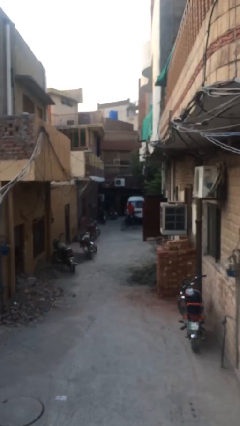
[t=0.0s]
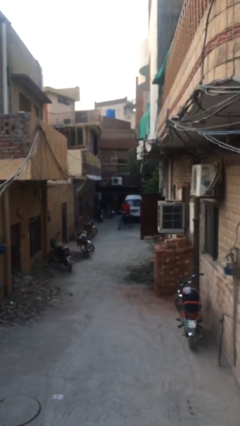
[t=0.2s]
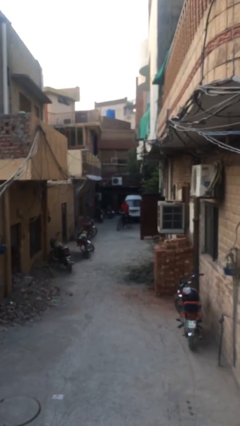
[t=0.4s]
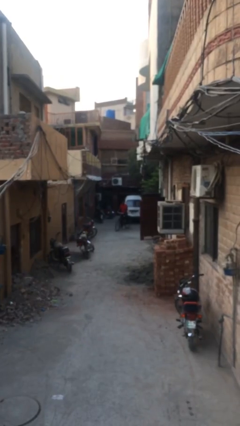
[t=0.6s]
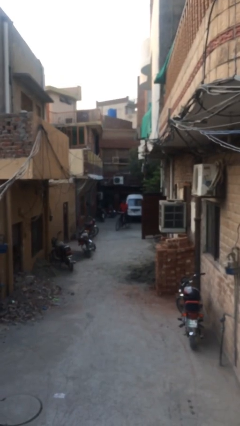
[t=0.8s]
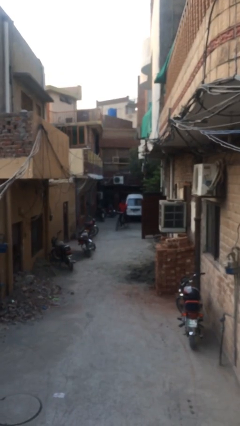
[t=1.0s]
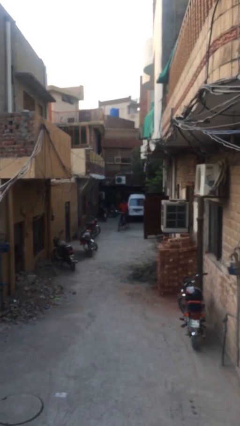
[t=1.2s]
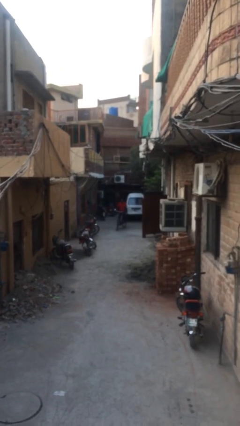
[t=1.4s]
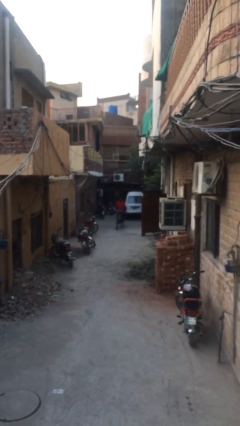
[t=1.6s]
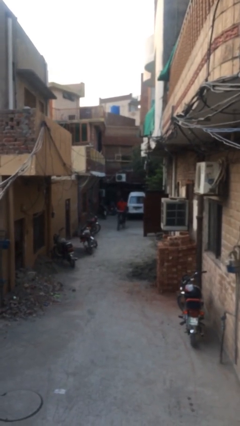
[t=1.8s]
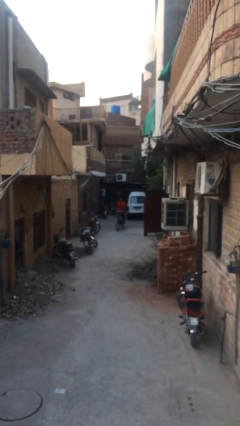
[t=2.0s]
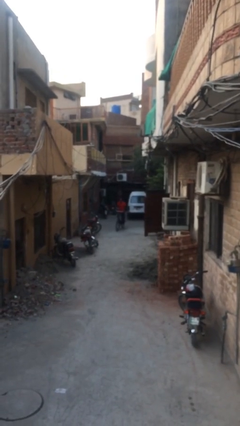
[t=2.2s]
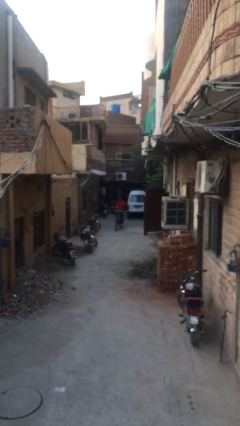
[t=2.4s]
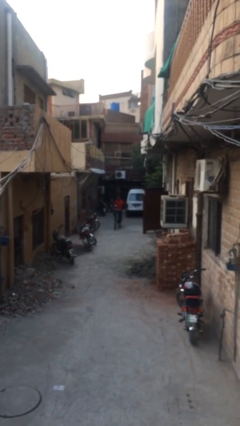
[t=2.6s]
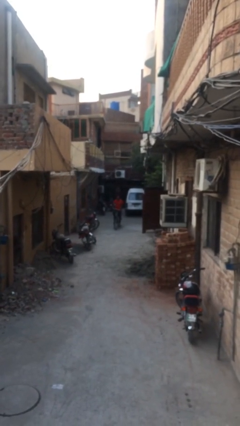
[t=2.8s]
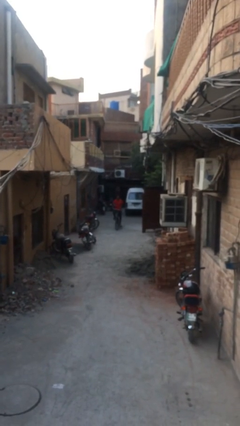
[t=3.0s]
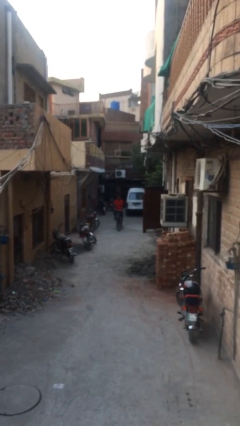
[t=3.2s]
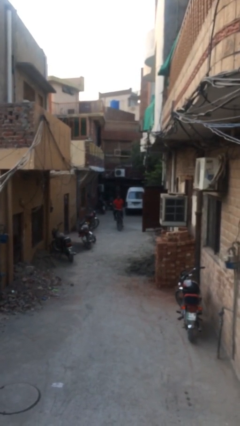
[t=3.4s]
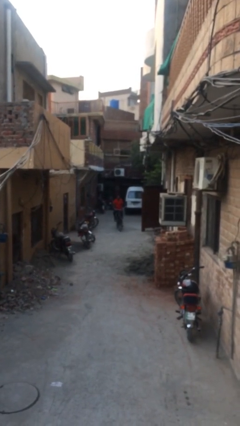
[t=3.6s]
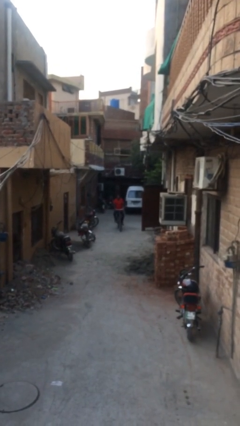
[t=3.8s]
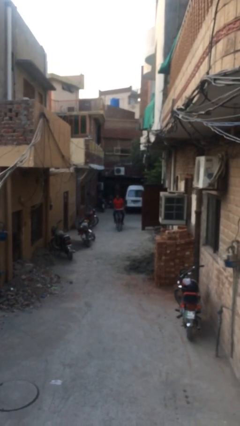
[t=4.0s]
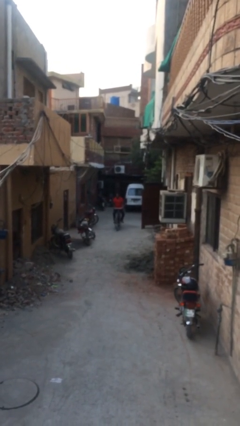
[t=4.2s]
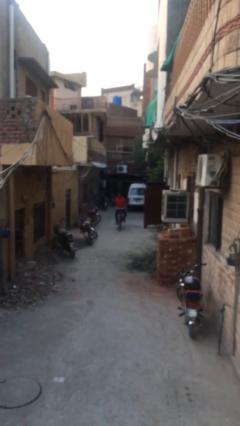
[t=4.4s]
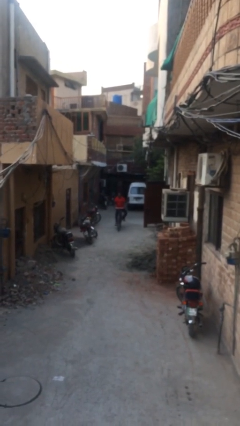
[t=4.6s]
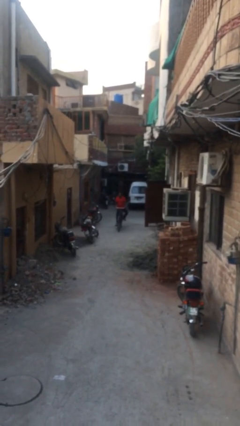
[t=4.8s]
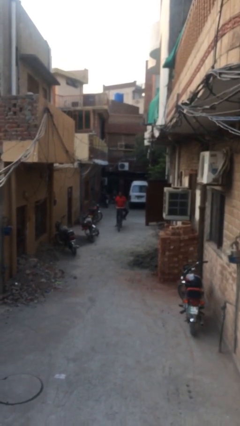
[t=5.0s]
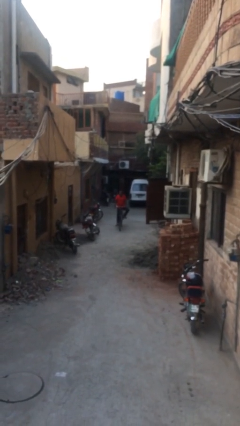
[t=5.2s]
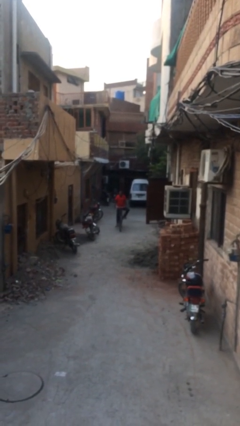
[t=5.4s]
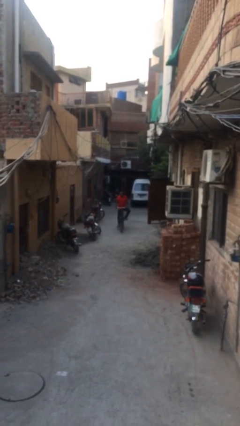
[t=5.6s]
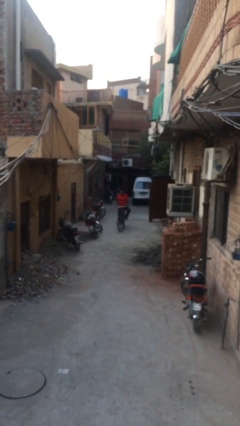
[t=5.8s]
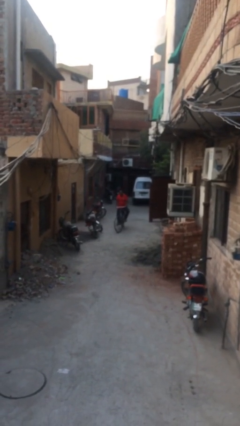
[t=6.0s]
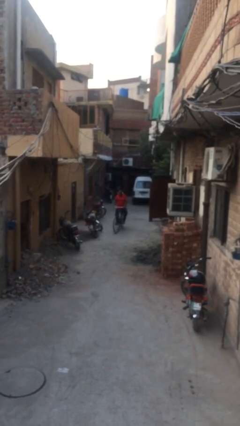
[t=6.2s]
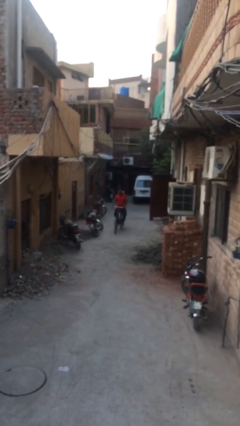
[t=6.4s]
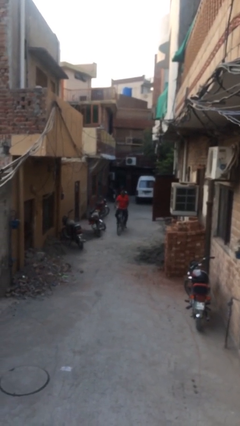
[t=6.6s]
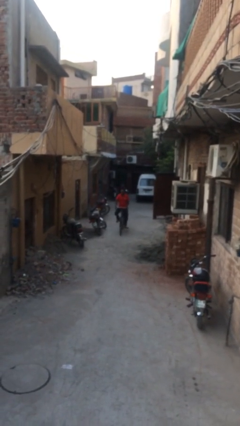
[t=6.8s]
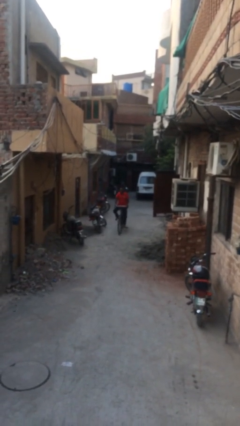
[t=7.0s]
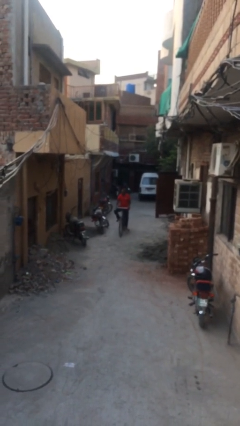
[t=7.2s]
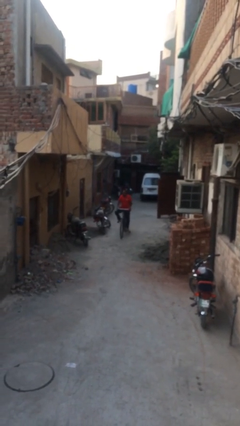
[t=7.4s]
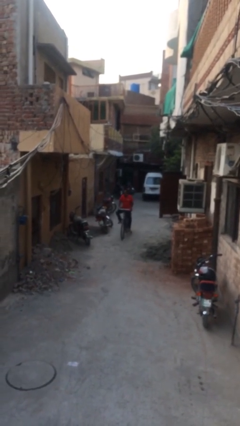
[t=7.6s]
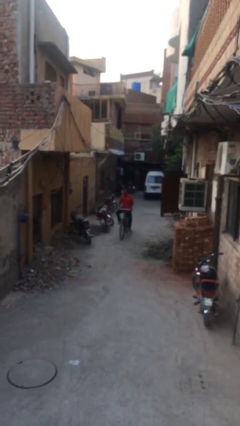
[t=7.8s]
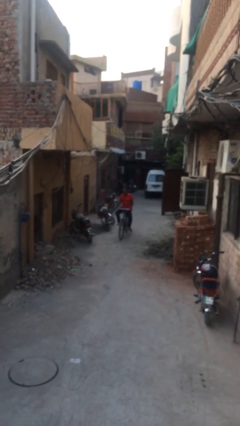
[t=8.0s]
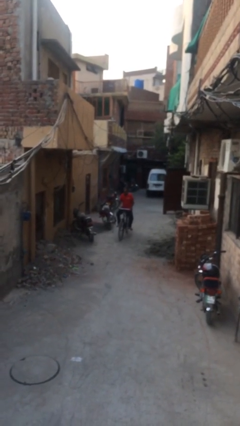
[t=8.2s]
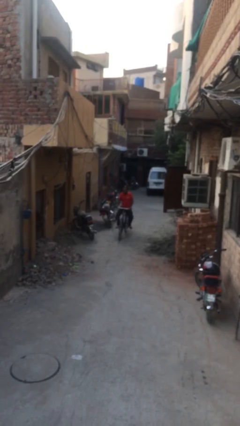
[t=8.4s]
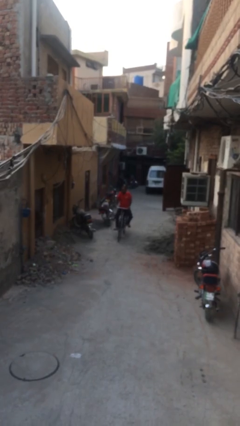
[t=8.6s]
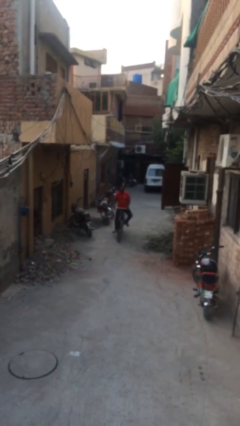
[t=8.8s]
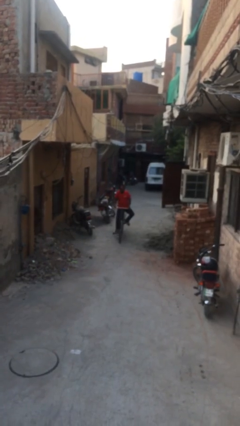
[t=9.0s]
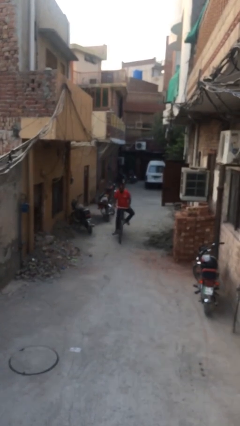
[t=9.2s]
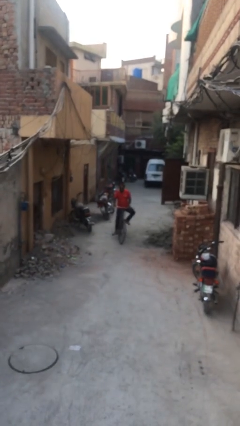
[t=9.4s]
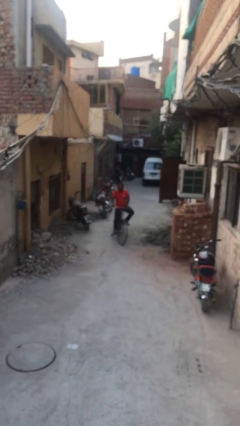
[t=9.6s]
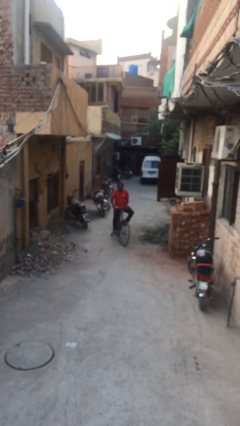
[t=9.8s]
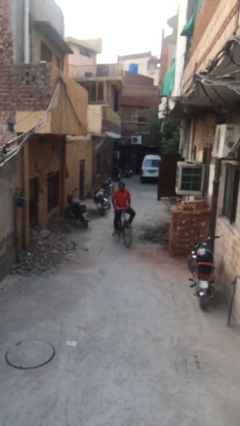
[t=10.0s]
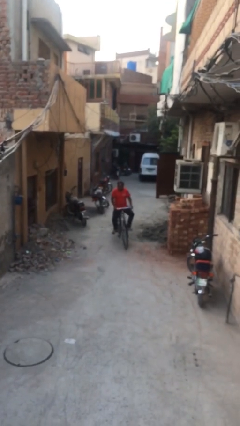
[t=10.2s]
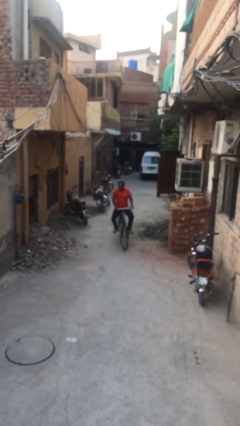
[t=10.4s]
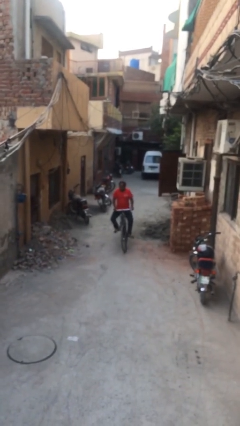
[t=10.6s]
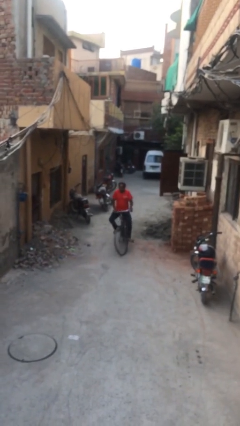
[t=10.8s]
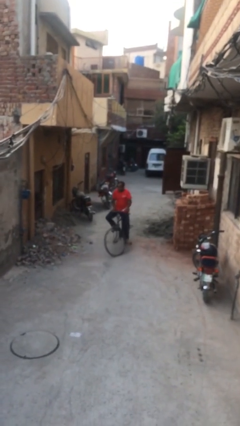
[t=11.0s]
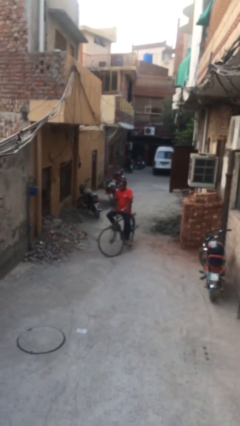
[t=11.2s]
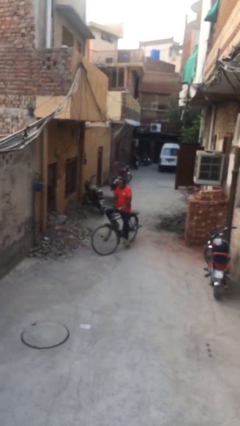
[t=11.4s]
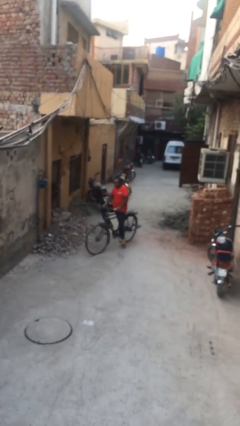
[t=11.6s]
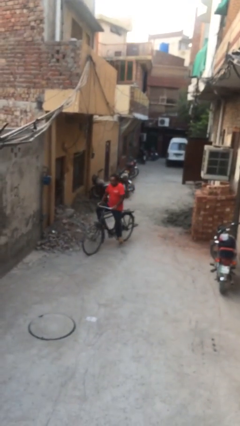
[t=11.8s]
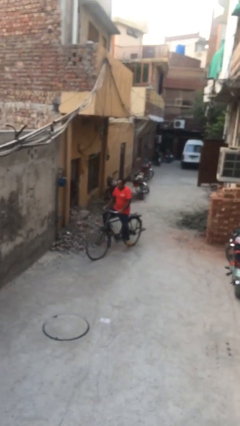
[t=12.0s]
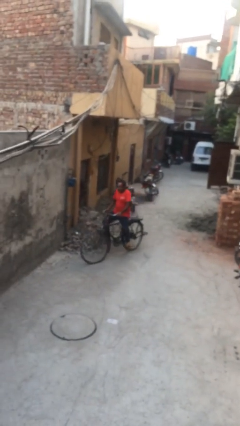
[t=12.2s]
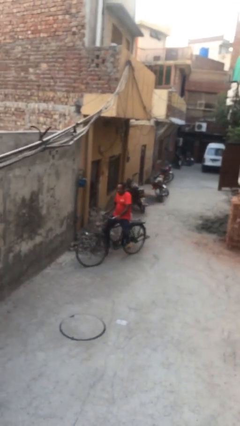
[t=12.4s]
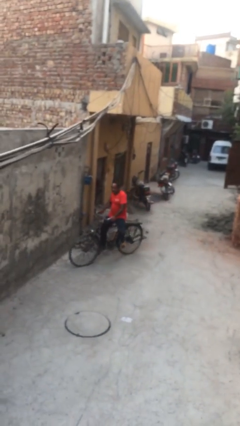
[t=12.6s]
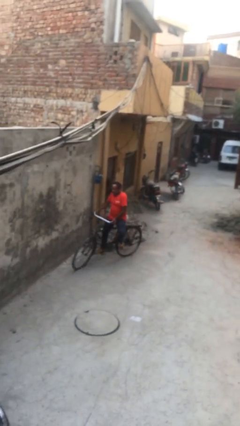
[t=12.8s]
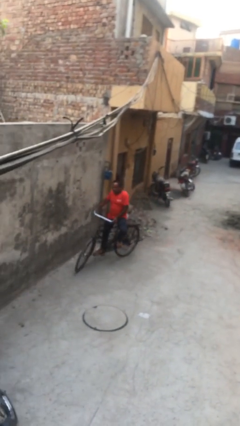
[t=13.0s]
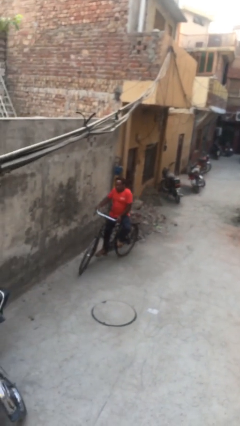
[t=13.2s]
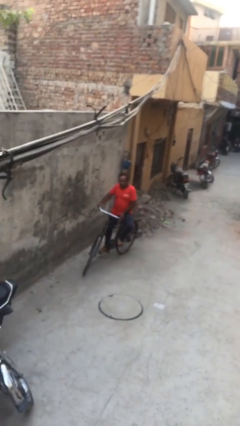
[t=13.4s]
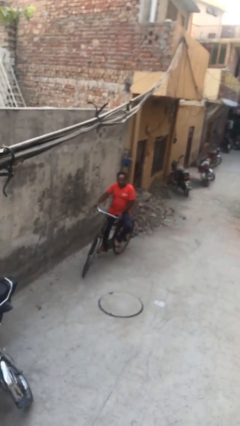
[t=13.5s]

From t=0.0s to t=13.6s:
person rides bicycle

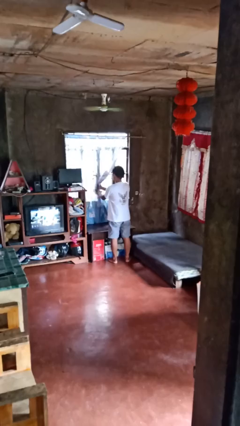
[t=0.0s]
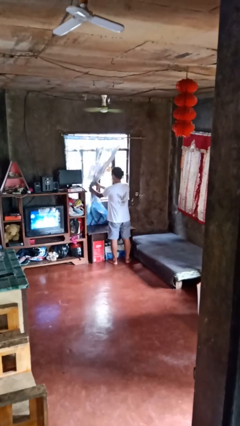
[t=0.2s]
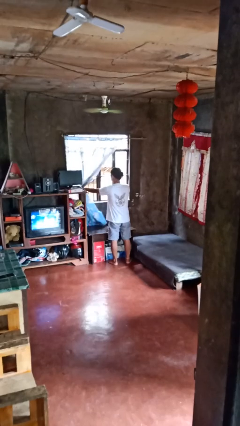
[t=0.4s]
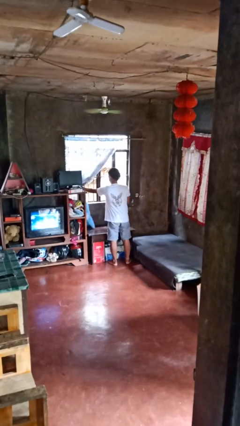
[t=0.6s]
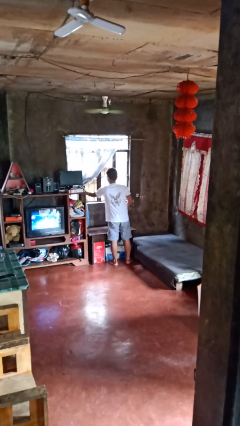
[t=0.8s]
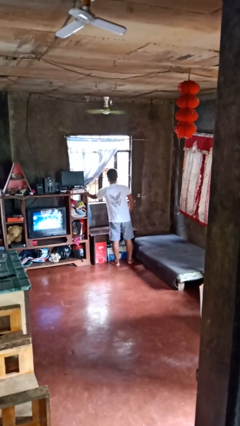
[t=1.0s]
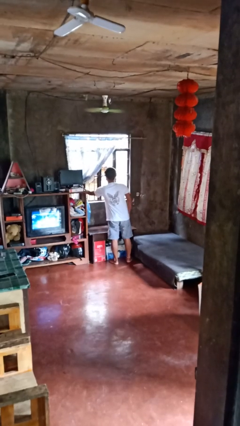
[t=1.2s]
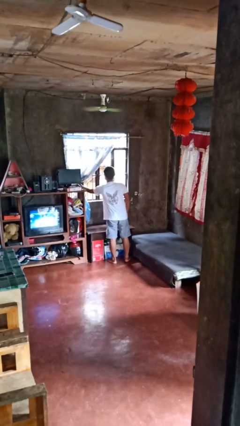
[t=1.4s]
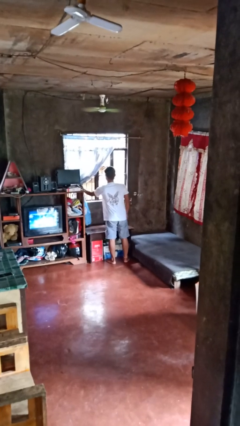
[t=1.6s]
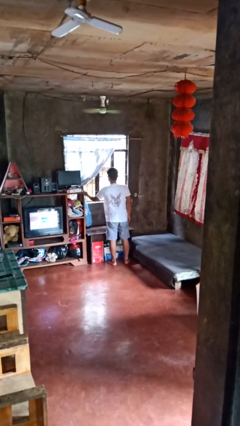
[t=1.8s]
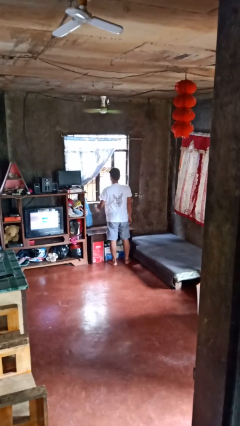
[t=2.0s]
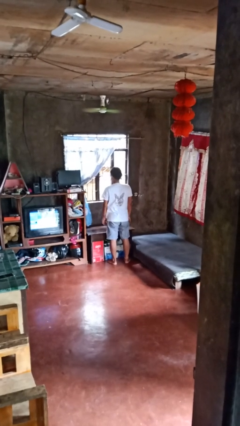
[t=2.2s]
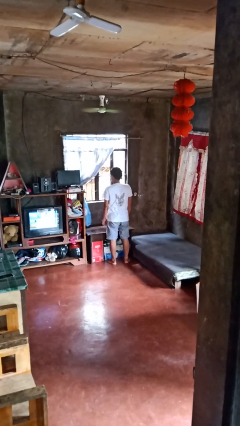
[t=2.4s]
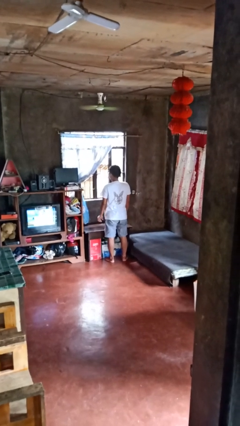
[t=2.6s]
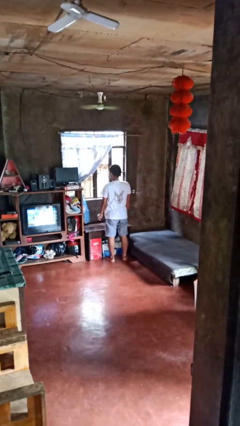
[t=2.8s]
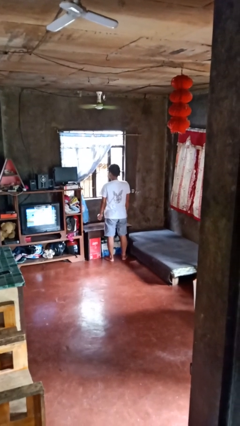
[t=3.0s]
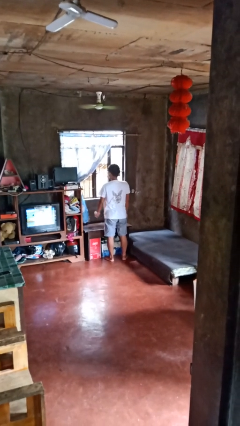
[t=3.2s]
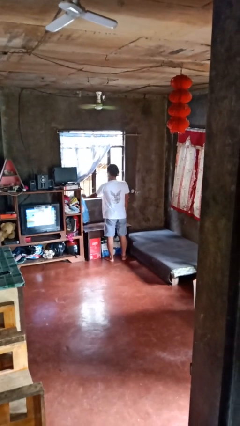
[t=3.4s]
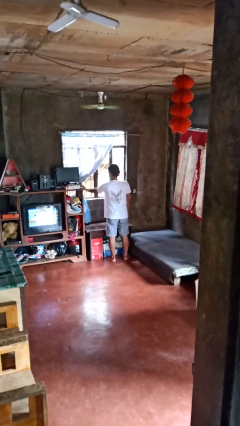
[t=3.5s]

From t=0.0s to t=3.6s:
person opens curtains

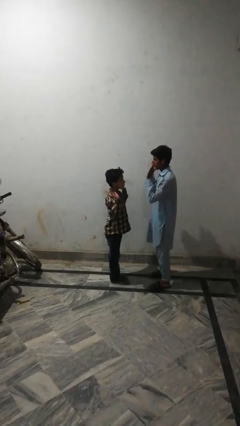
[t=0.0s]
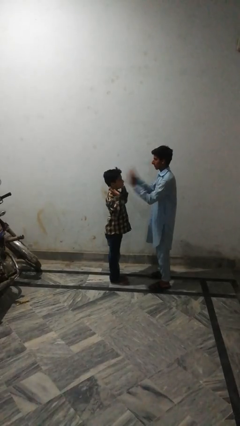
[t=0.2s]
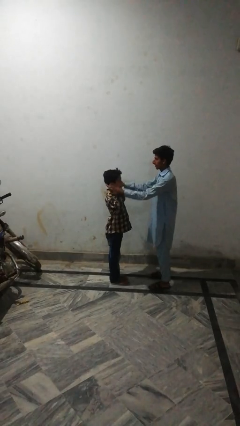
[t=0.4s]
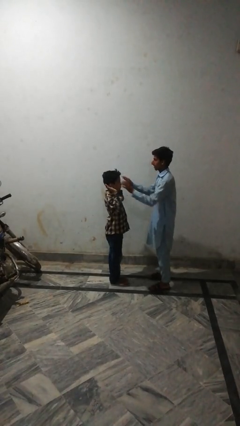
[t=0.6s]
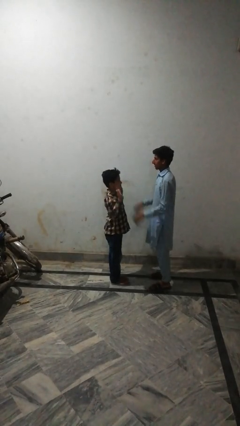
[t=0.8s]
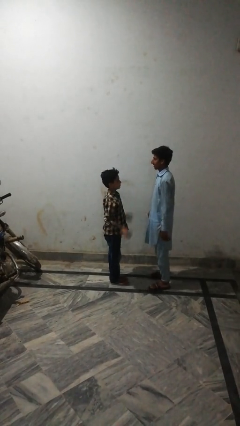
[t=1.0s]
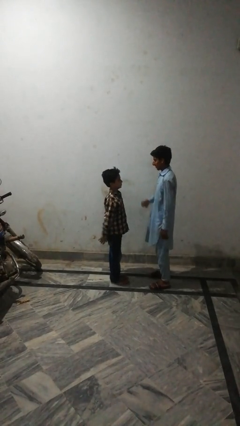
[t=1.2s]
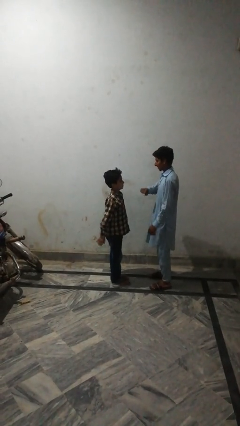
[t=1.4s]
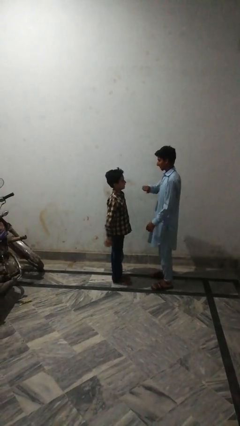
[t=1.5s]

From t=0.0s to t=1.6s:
person highfives hand
